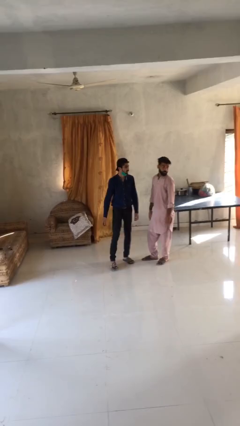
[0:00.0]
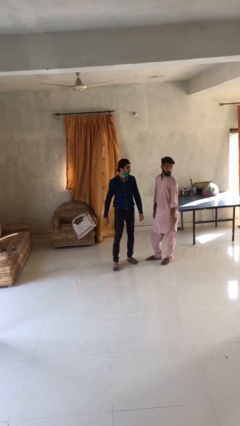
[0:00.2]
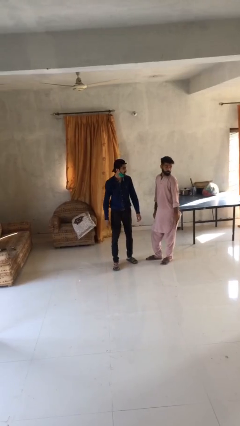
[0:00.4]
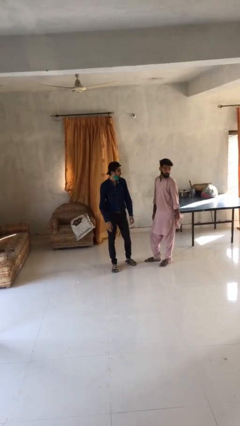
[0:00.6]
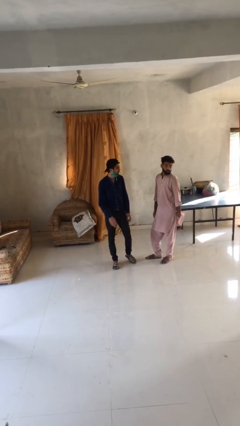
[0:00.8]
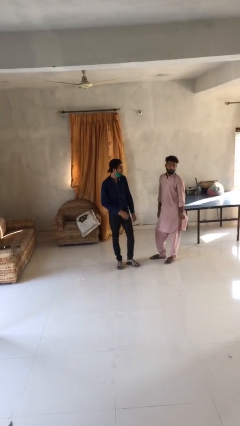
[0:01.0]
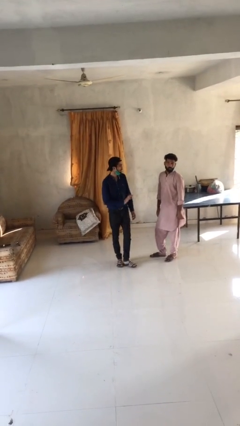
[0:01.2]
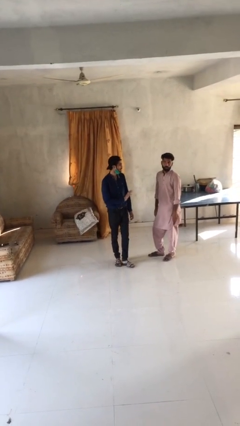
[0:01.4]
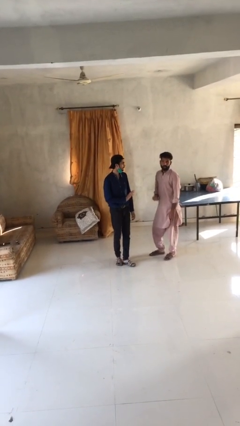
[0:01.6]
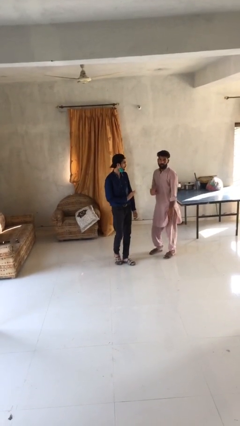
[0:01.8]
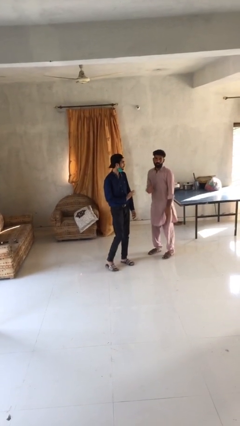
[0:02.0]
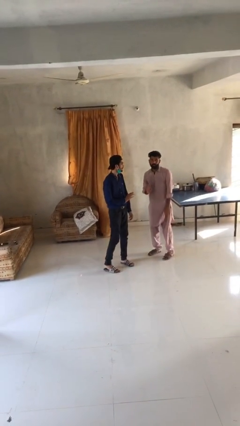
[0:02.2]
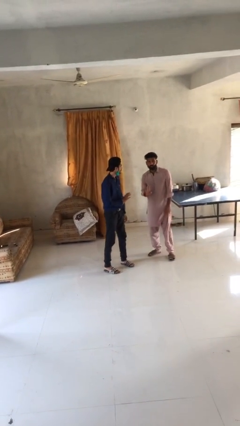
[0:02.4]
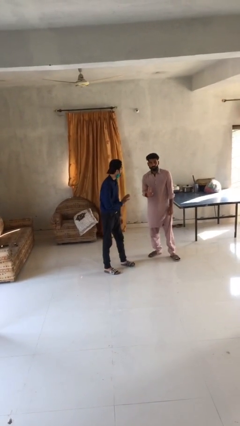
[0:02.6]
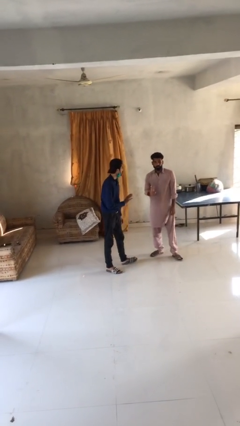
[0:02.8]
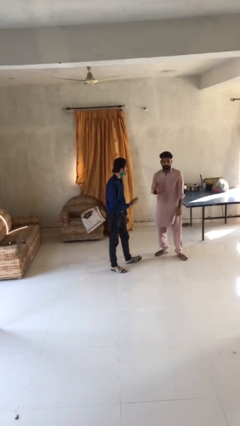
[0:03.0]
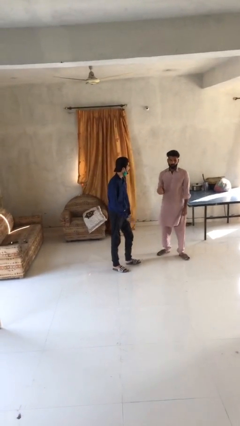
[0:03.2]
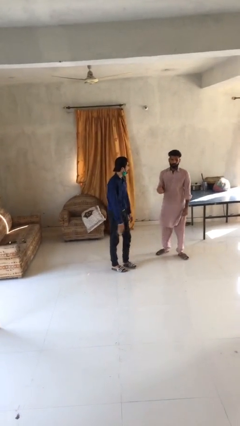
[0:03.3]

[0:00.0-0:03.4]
person talks to person

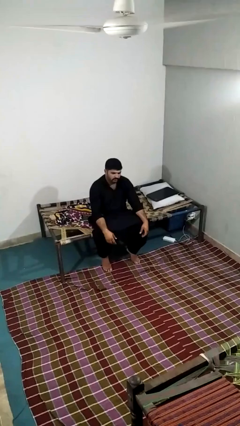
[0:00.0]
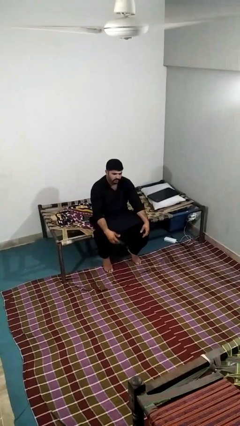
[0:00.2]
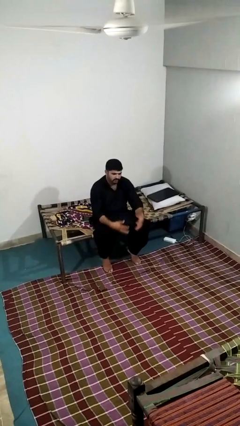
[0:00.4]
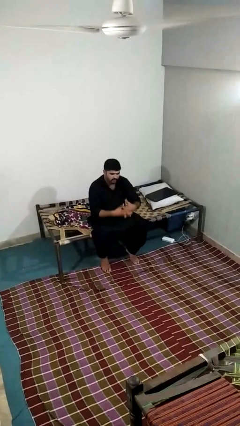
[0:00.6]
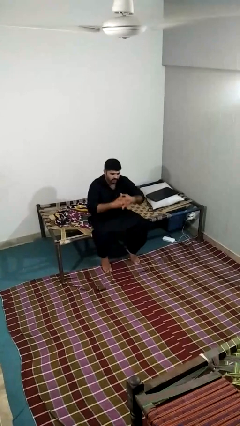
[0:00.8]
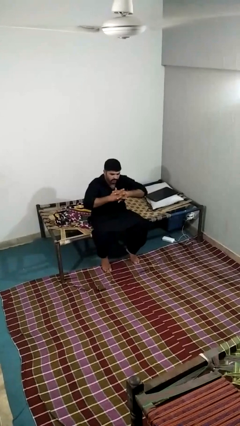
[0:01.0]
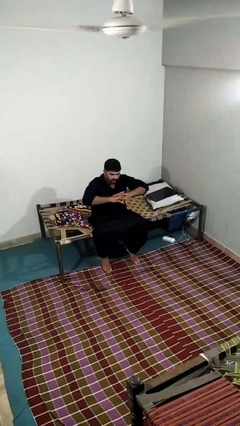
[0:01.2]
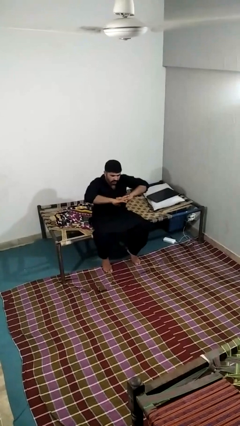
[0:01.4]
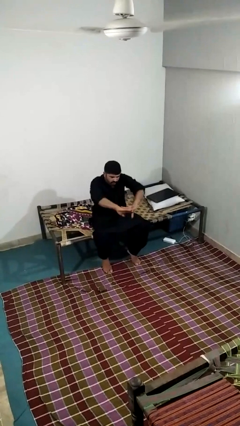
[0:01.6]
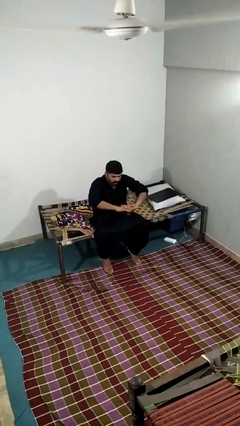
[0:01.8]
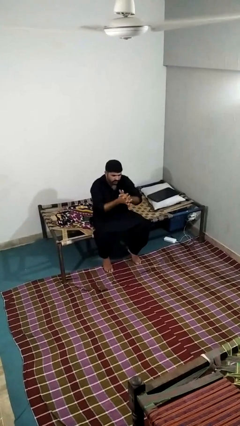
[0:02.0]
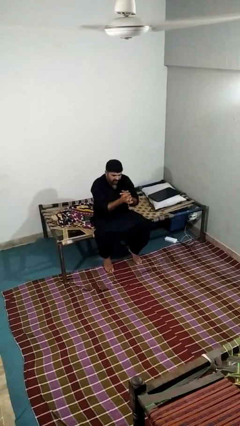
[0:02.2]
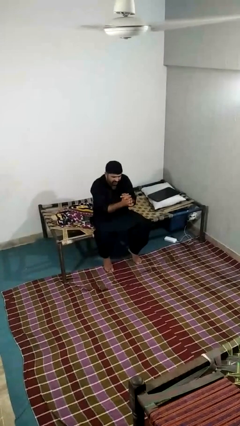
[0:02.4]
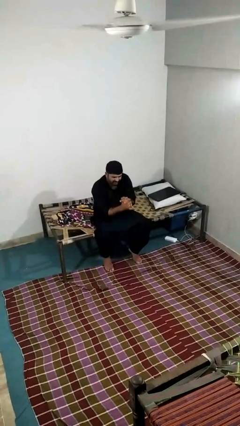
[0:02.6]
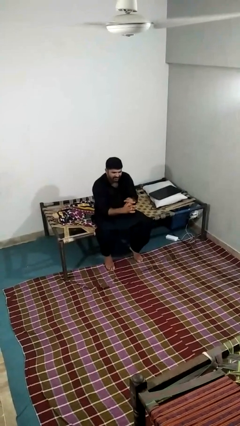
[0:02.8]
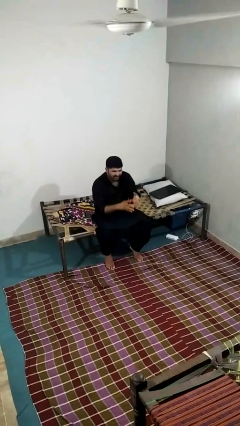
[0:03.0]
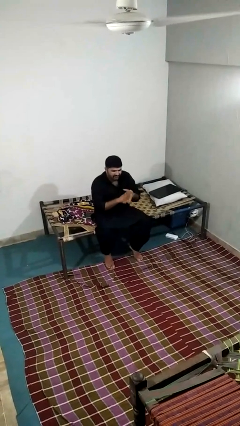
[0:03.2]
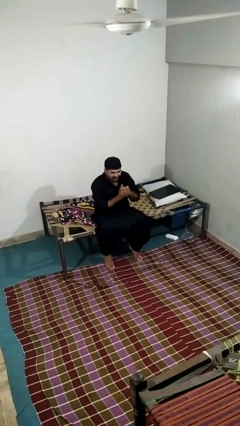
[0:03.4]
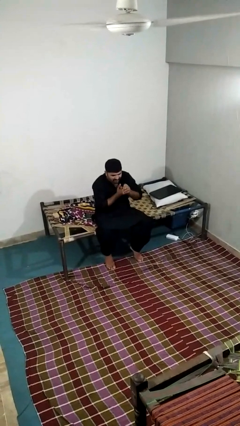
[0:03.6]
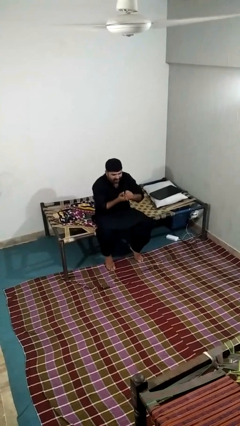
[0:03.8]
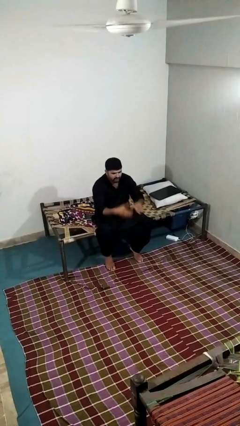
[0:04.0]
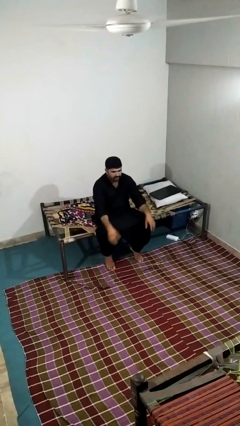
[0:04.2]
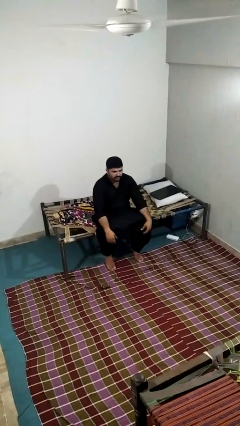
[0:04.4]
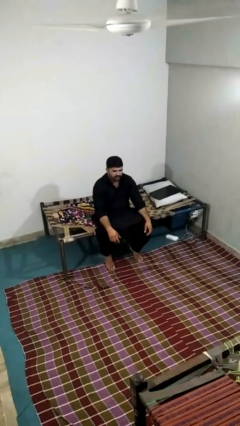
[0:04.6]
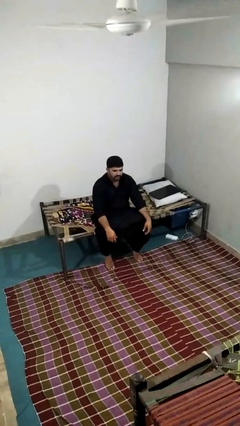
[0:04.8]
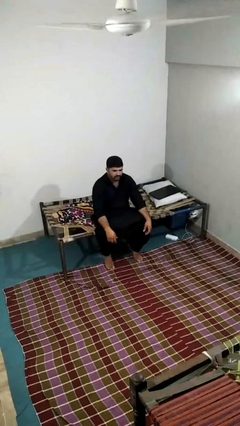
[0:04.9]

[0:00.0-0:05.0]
person cracks knuckles

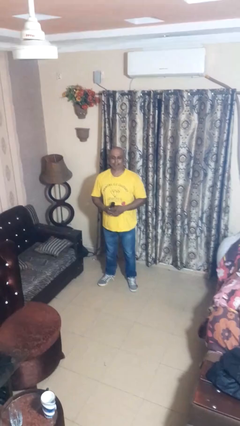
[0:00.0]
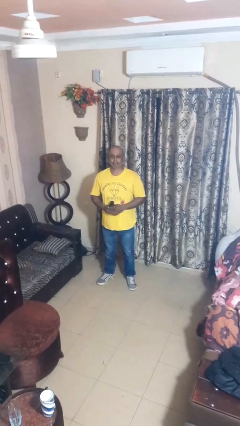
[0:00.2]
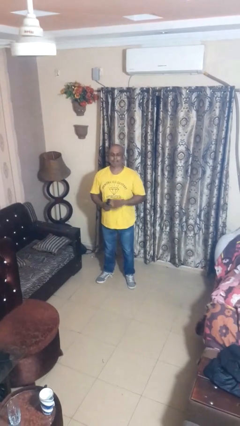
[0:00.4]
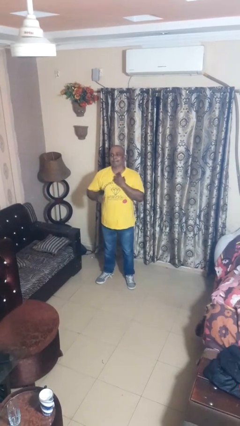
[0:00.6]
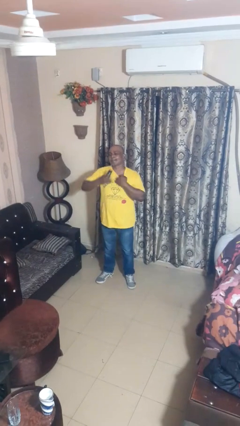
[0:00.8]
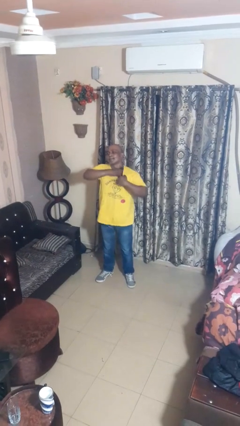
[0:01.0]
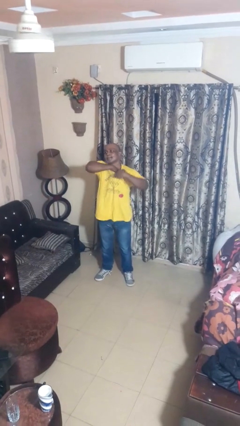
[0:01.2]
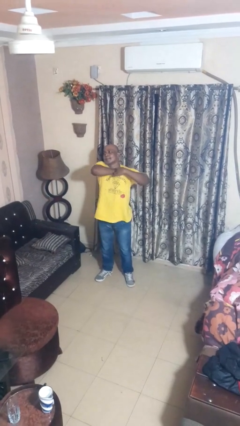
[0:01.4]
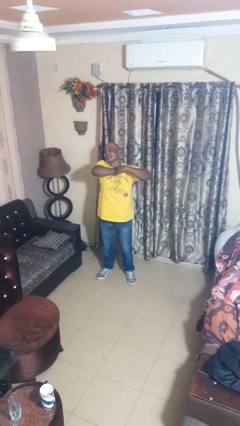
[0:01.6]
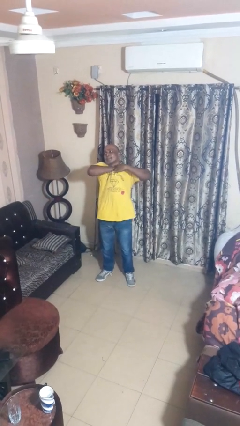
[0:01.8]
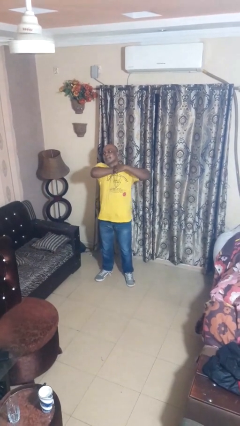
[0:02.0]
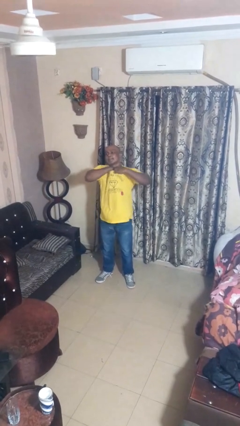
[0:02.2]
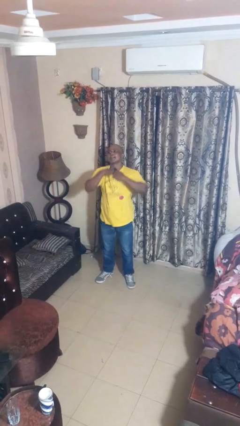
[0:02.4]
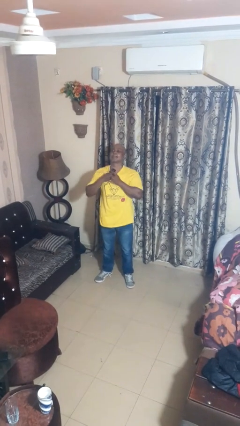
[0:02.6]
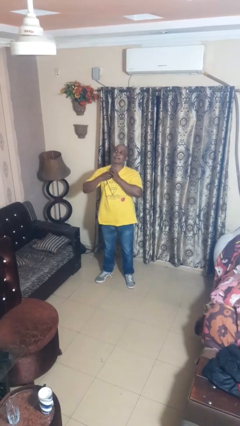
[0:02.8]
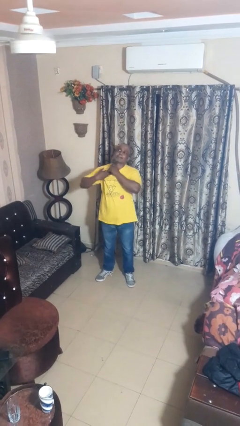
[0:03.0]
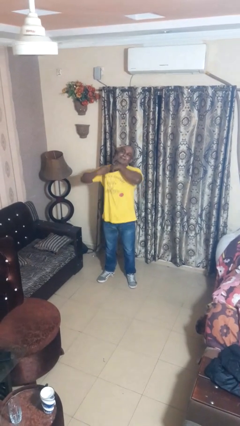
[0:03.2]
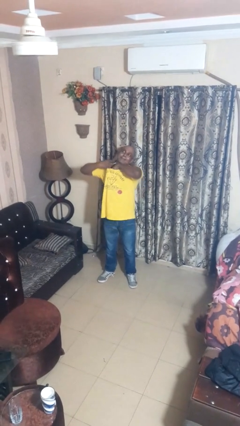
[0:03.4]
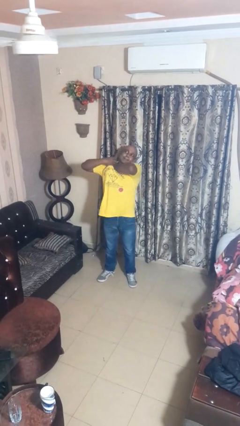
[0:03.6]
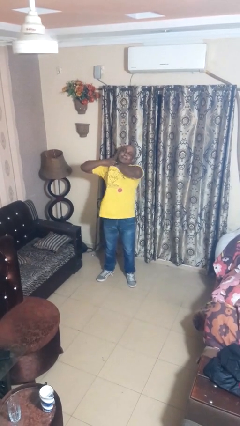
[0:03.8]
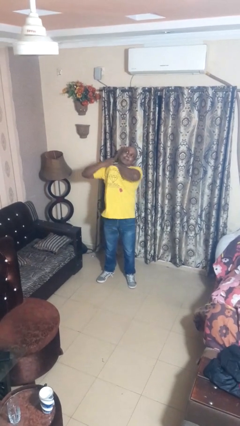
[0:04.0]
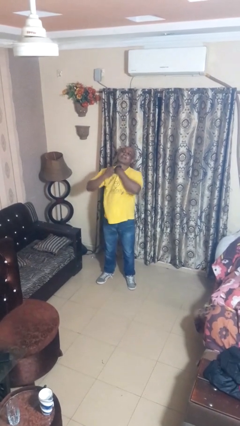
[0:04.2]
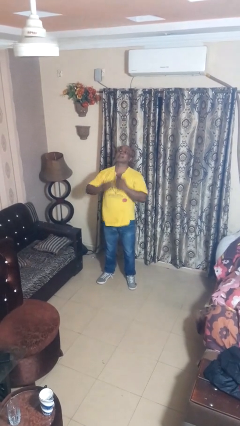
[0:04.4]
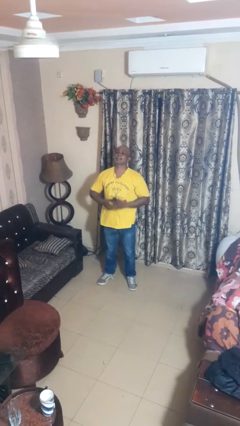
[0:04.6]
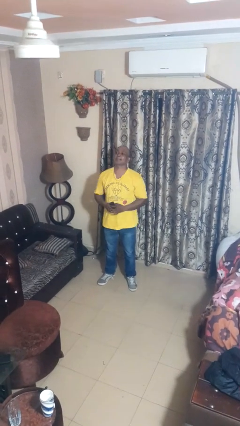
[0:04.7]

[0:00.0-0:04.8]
person applies deodorant

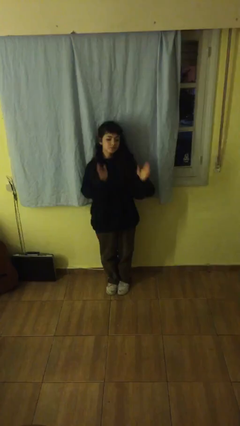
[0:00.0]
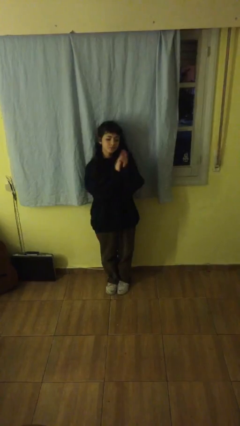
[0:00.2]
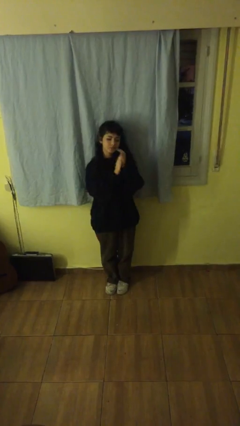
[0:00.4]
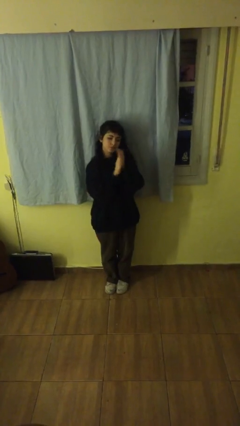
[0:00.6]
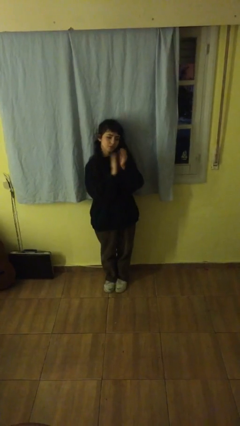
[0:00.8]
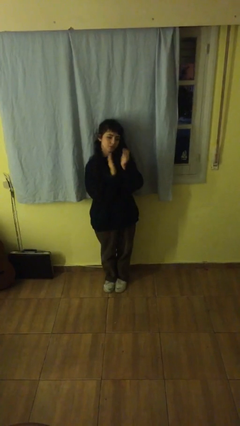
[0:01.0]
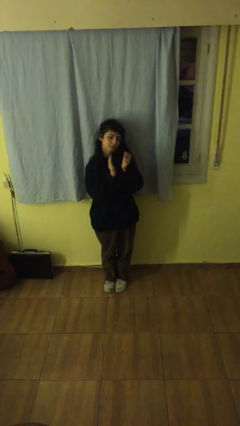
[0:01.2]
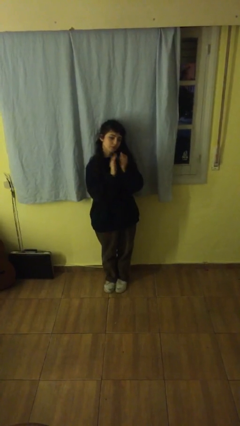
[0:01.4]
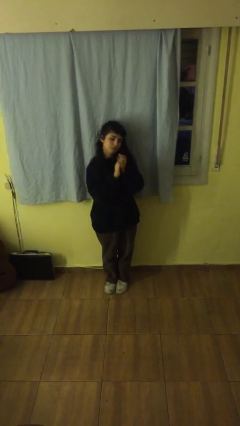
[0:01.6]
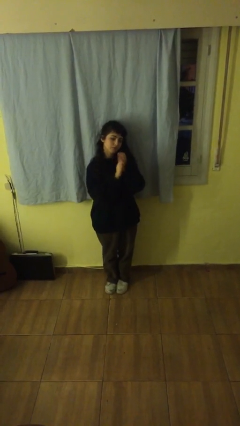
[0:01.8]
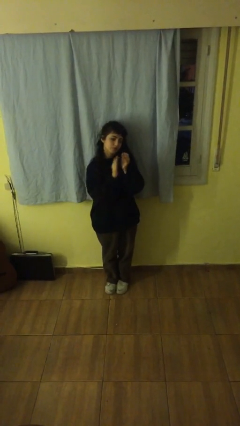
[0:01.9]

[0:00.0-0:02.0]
person claps hands

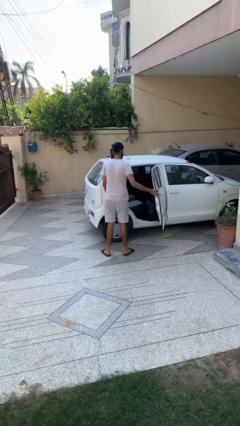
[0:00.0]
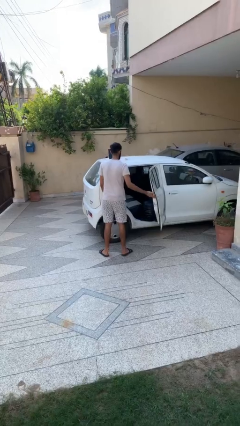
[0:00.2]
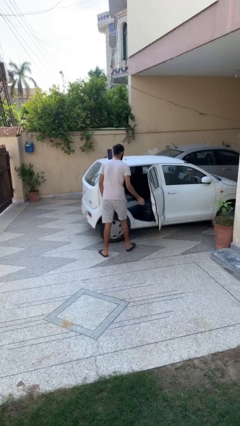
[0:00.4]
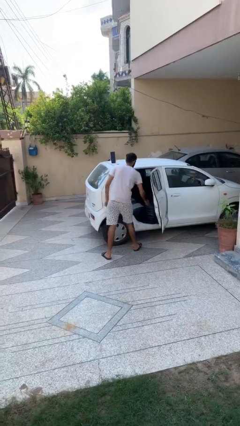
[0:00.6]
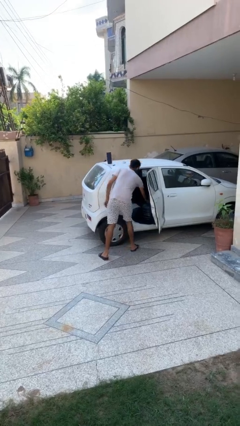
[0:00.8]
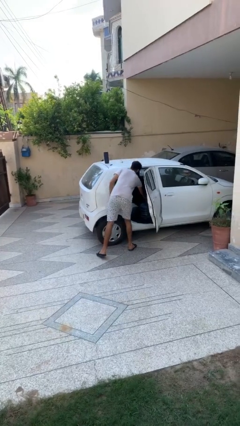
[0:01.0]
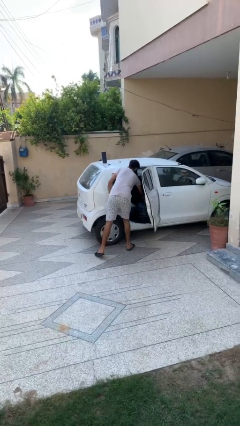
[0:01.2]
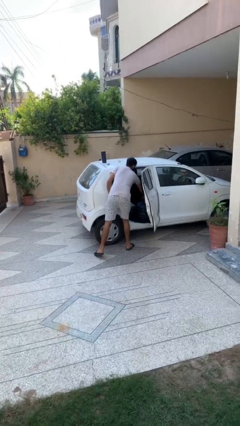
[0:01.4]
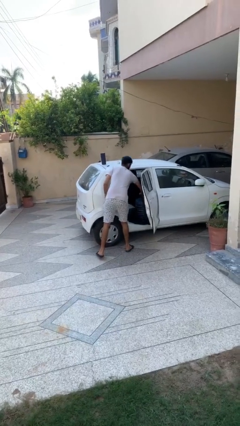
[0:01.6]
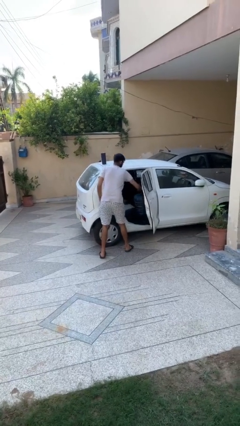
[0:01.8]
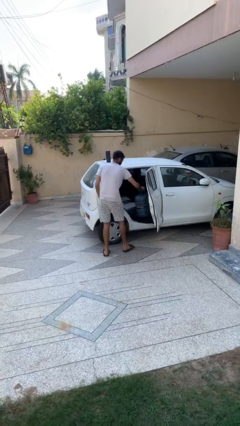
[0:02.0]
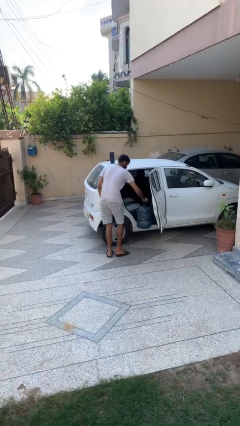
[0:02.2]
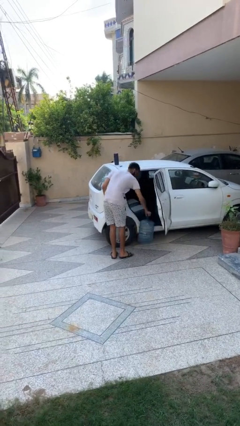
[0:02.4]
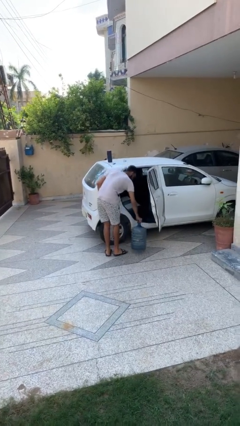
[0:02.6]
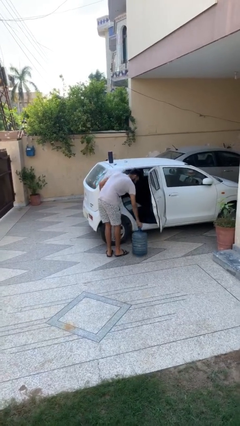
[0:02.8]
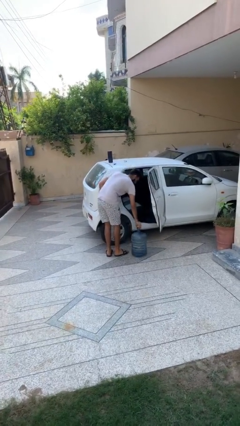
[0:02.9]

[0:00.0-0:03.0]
person unloads car
